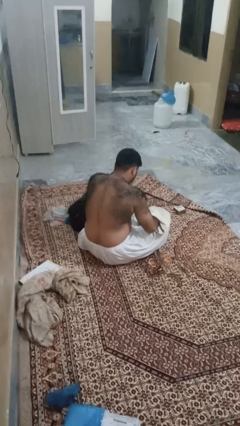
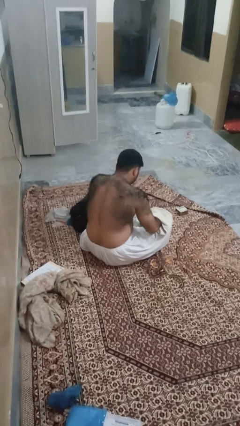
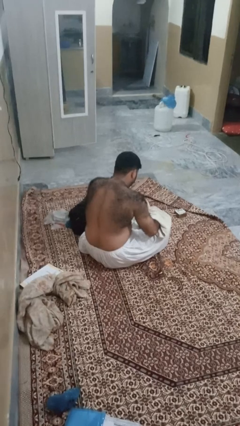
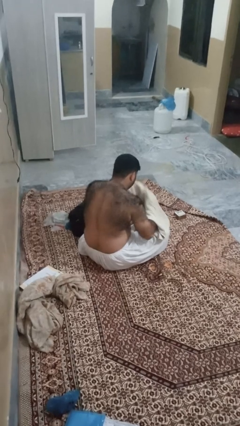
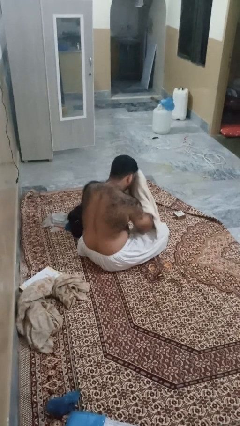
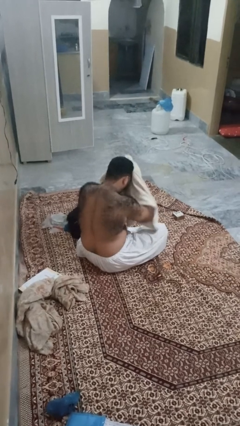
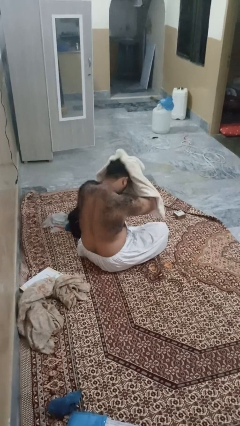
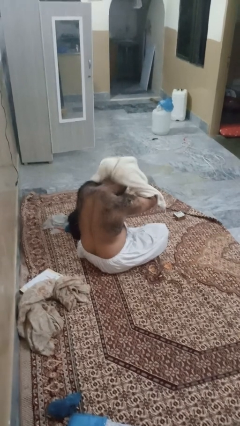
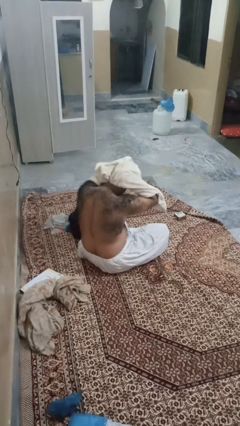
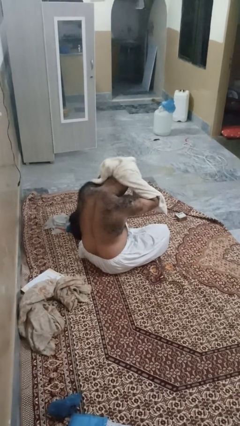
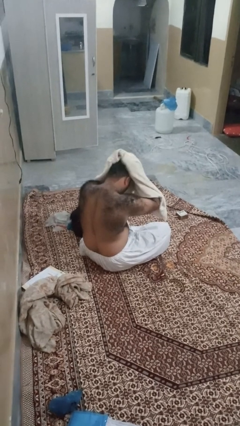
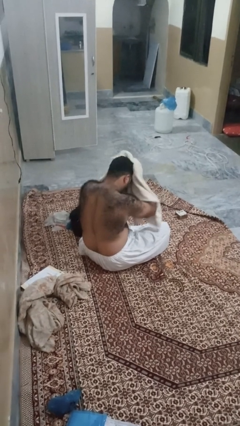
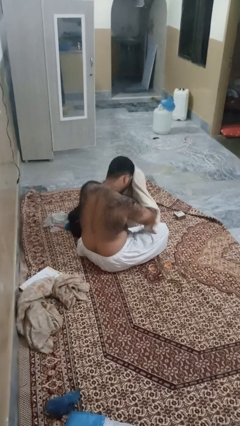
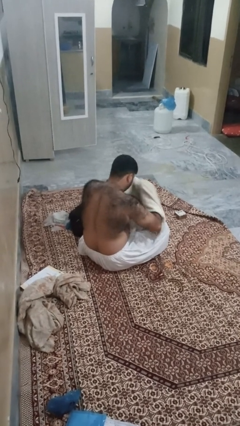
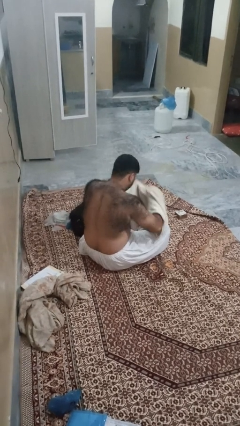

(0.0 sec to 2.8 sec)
person dries hair with towel

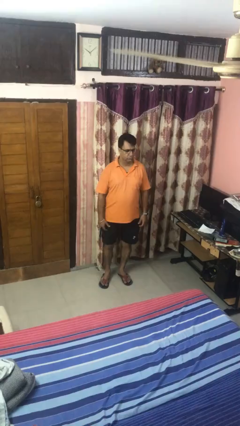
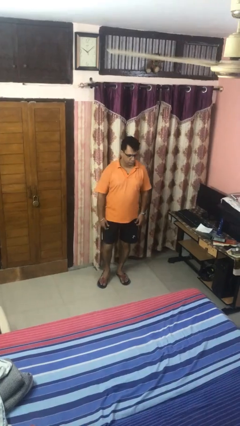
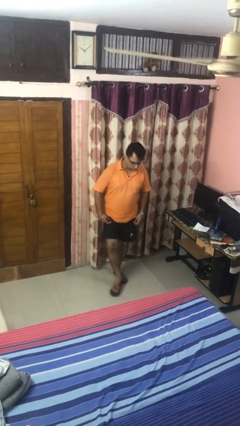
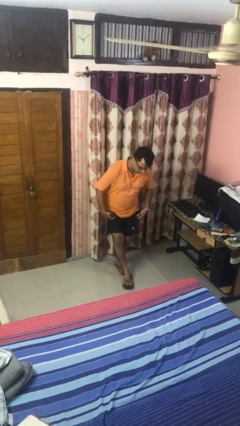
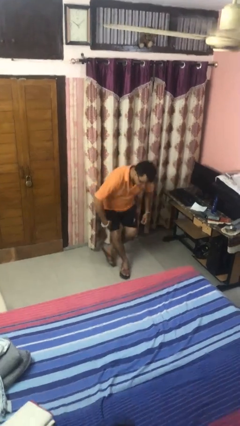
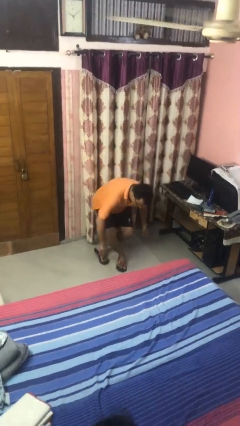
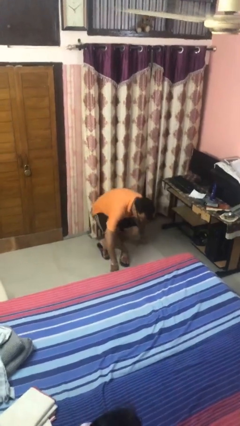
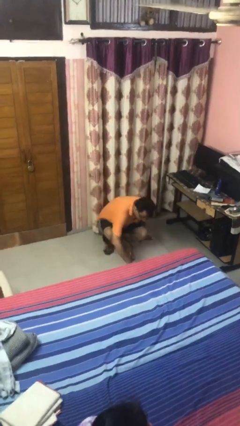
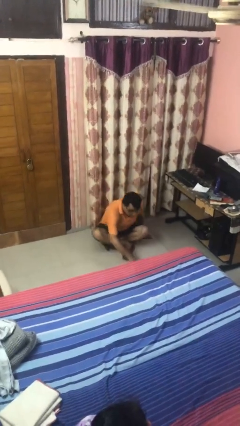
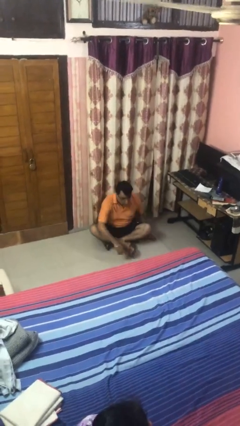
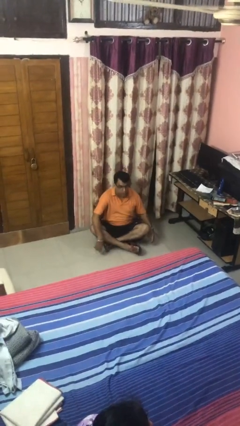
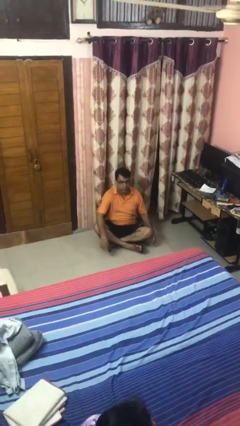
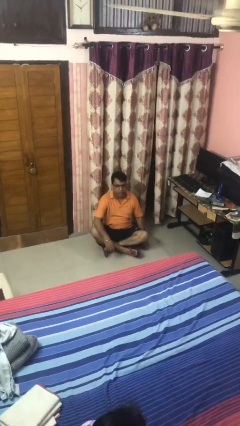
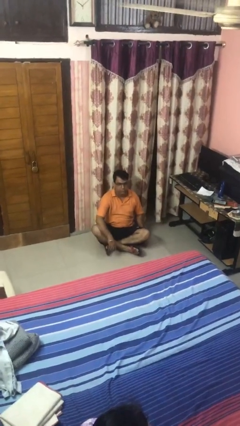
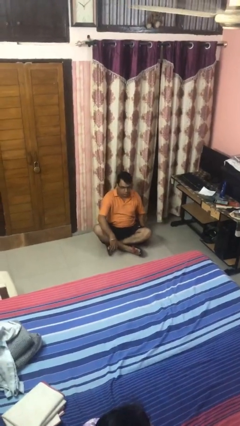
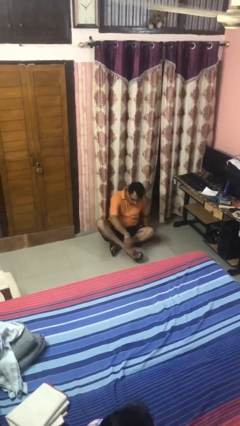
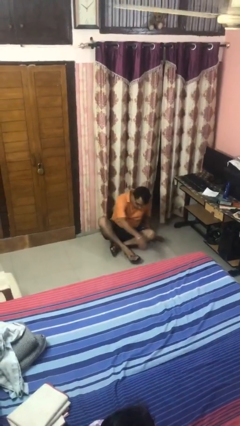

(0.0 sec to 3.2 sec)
person sits crisscross

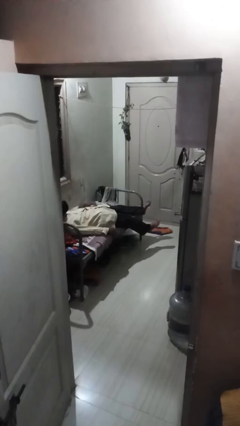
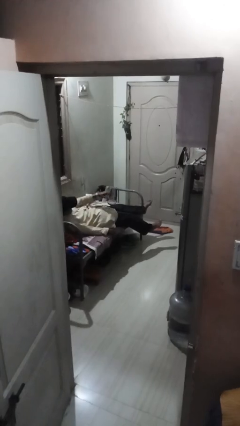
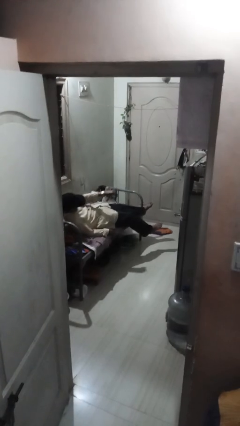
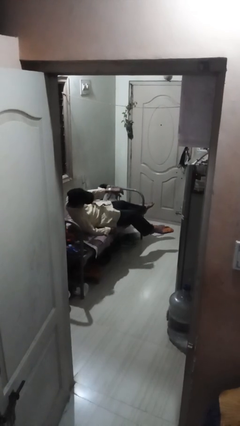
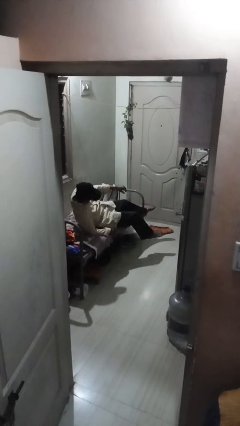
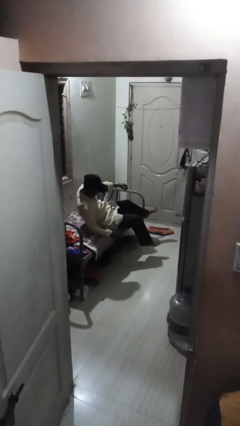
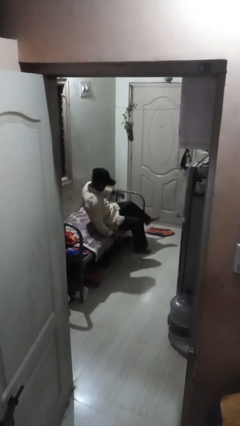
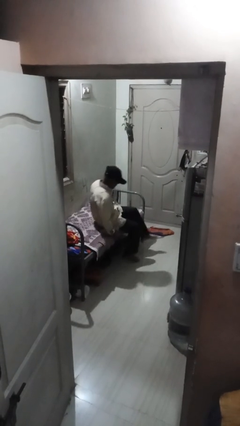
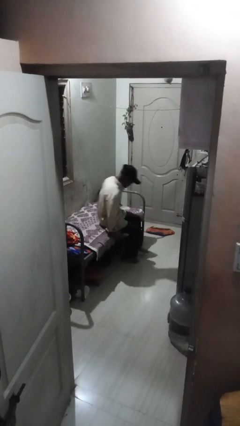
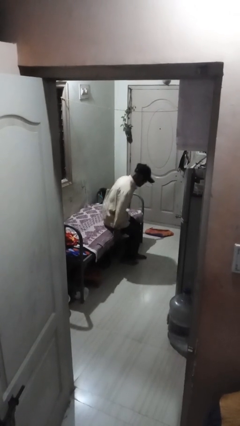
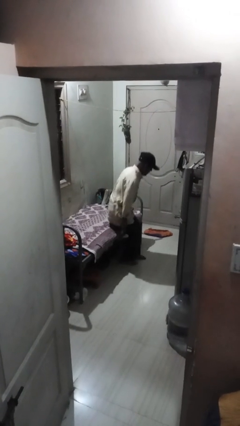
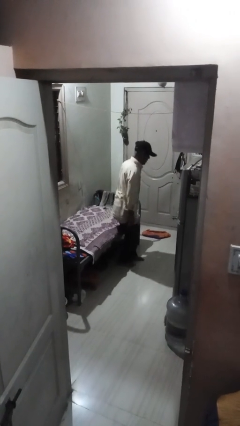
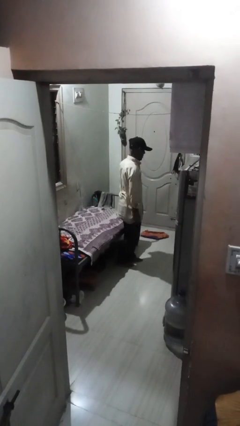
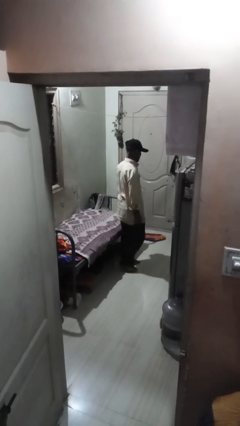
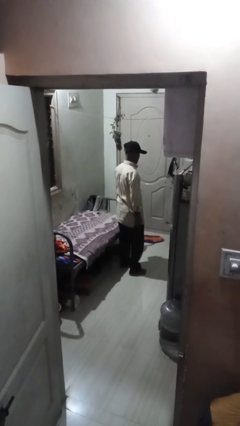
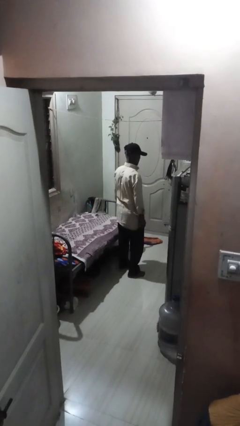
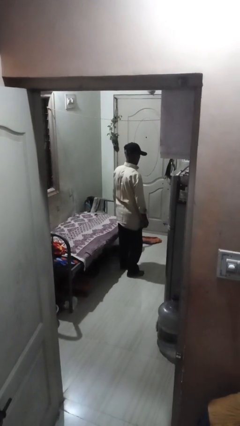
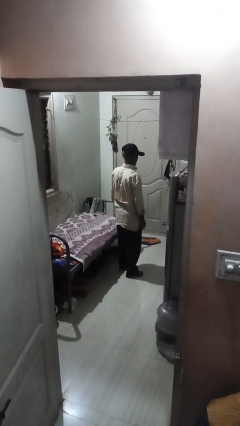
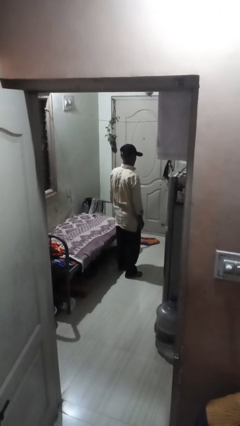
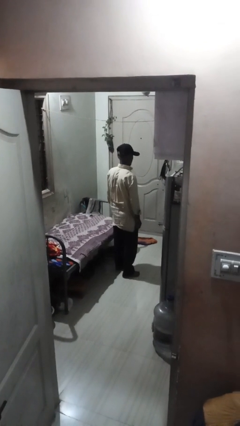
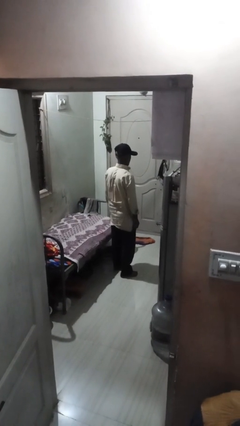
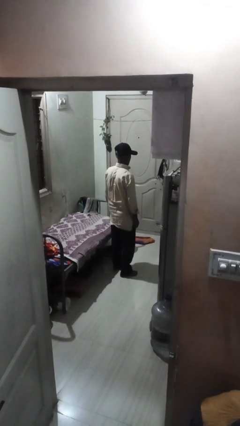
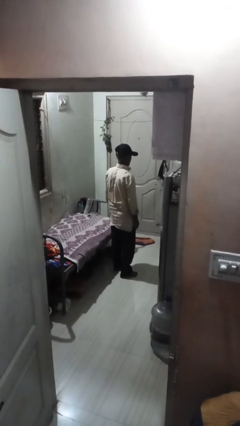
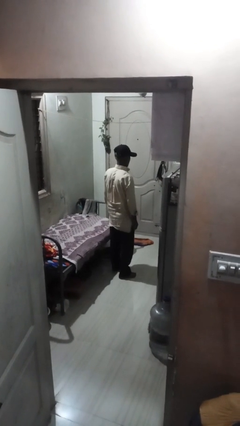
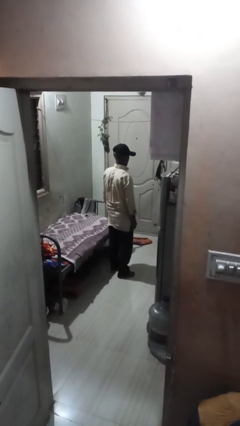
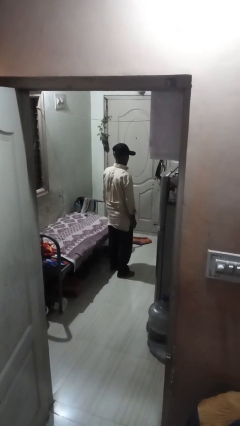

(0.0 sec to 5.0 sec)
person stands up

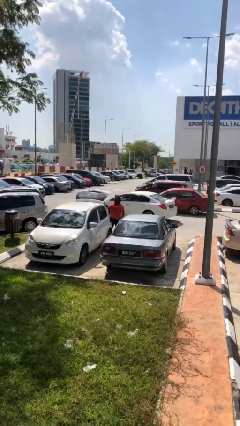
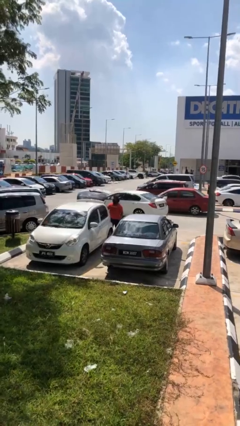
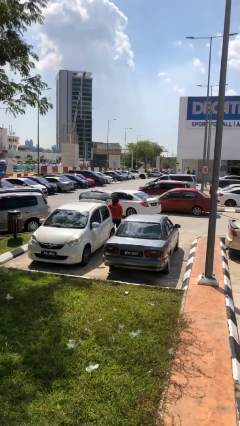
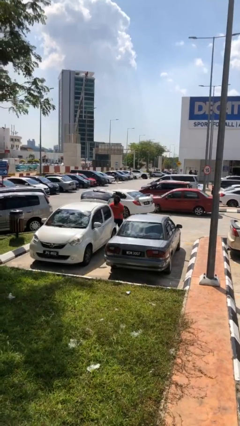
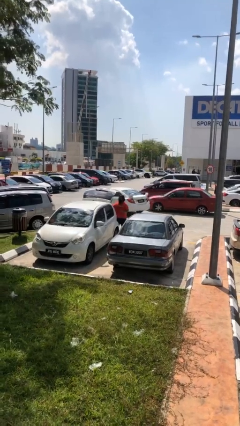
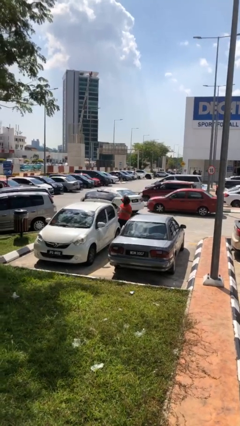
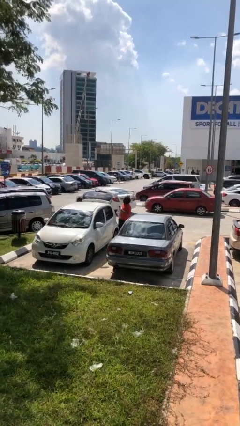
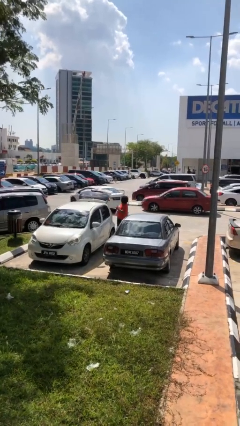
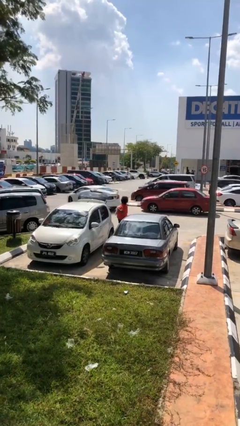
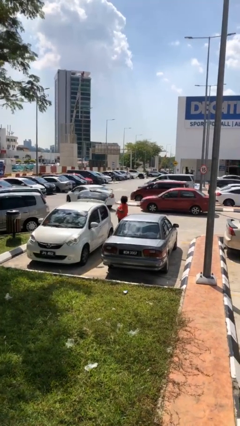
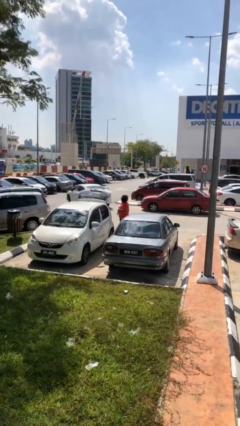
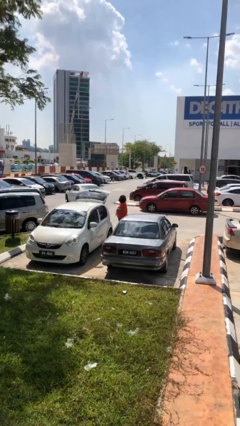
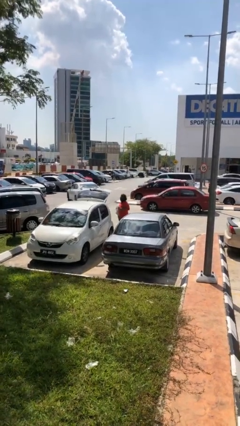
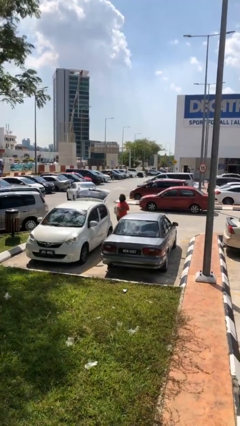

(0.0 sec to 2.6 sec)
person unloads car

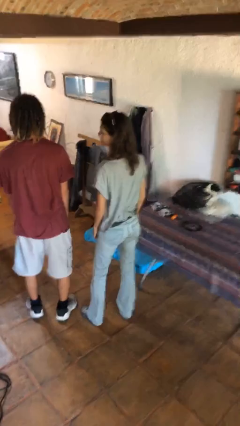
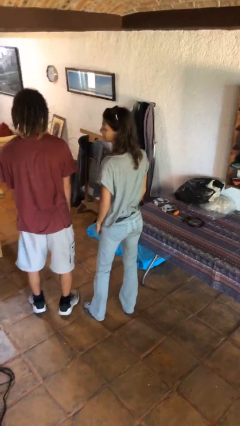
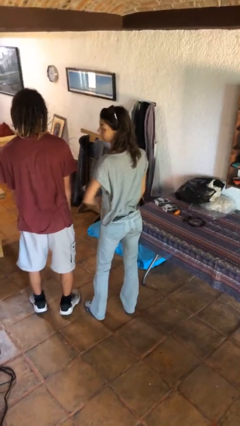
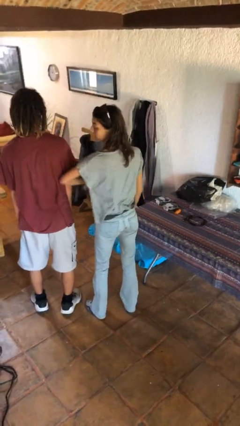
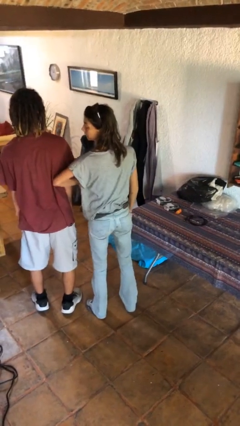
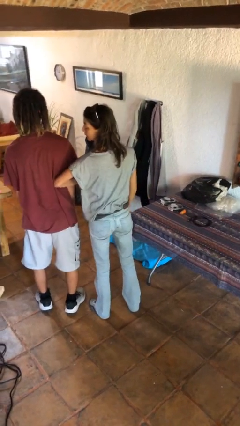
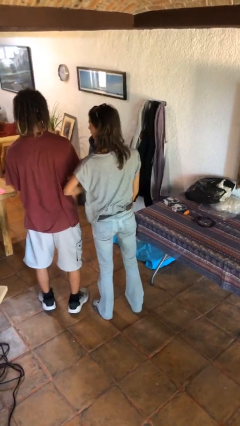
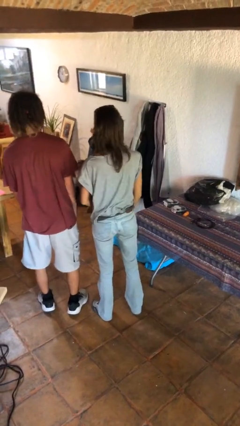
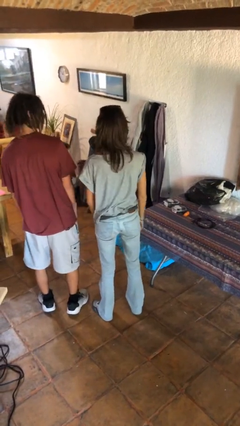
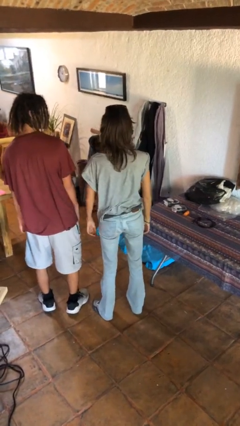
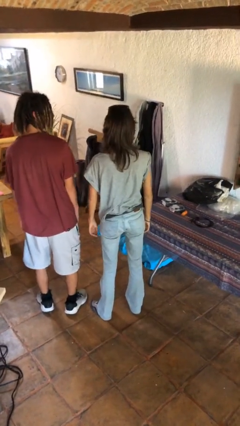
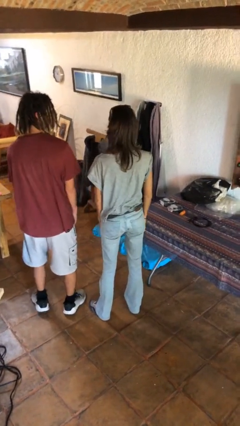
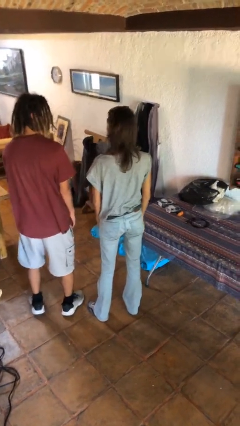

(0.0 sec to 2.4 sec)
person nudges person with elbow

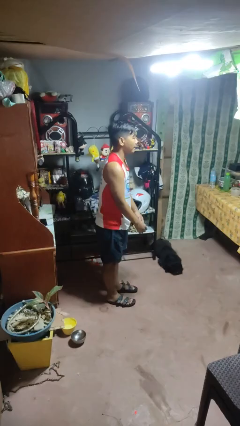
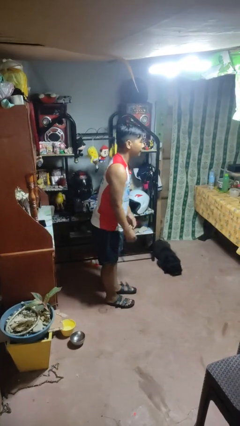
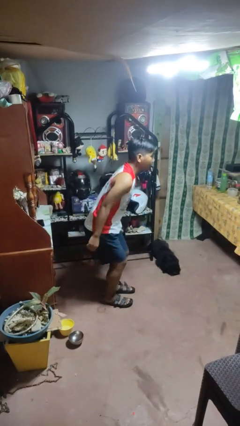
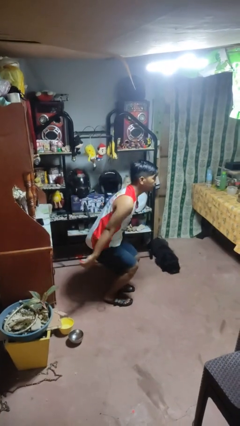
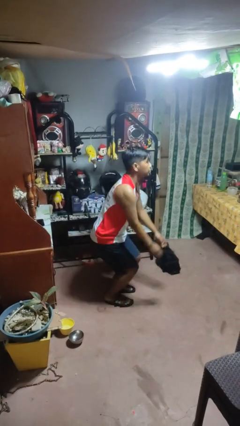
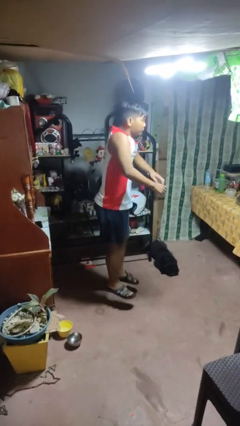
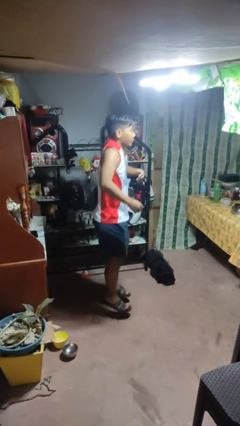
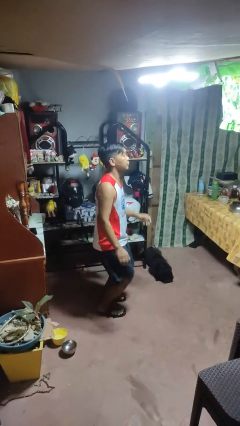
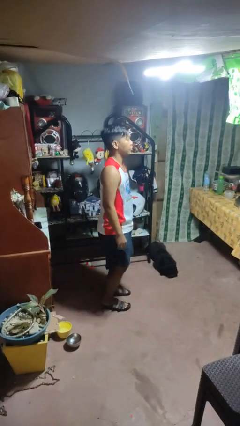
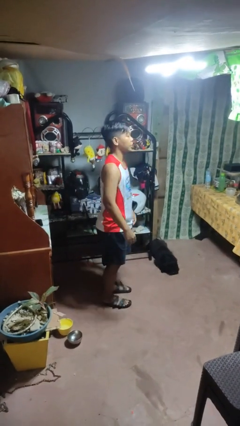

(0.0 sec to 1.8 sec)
person jumps
